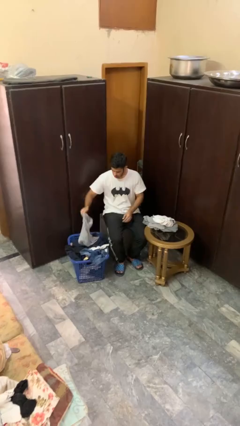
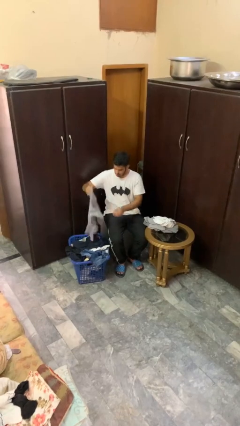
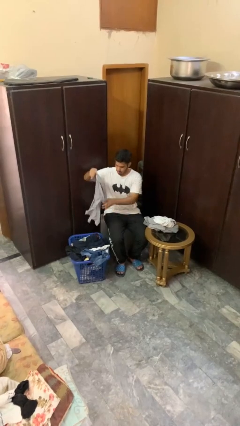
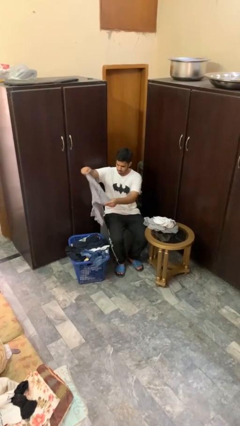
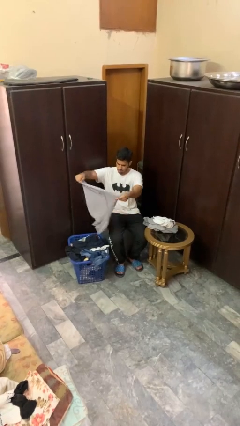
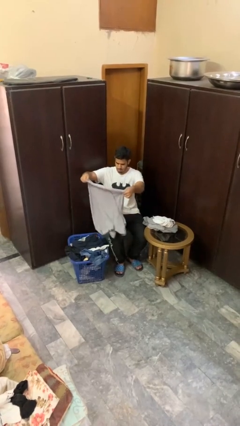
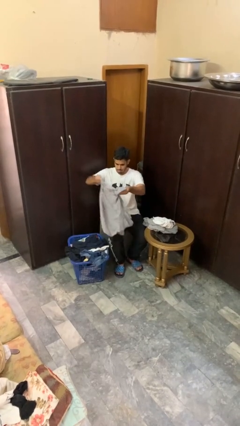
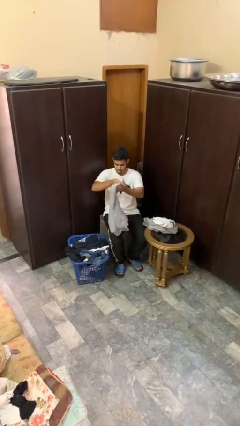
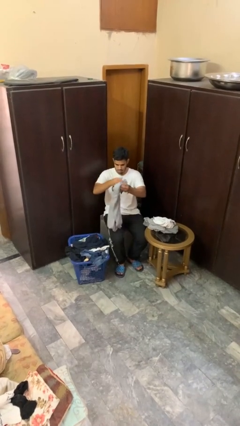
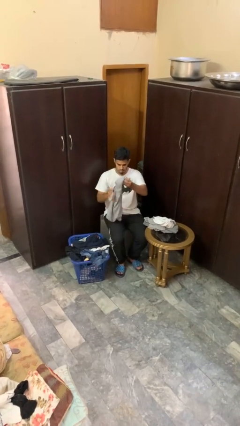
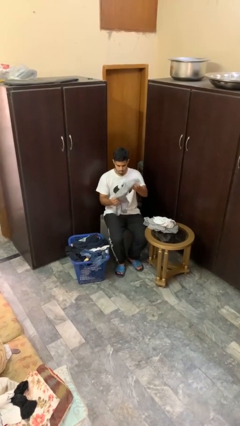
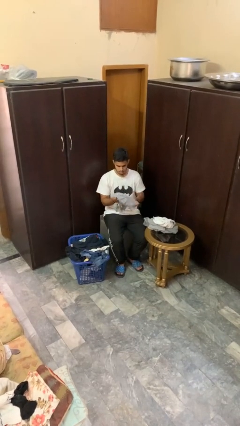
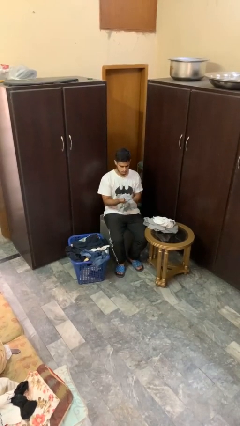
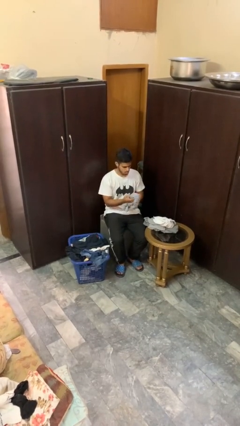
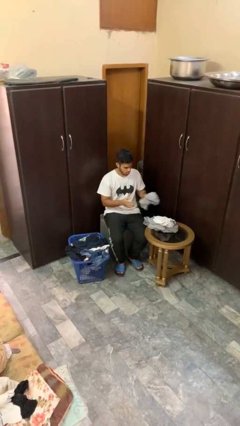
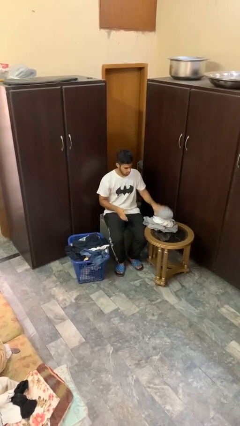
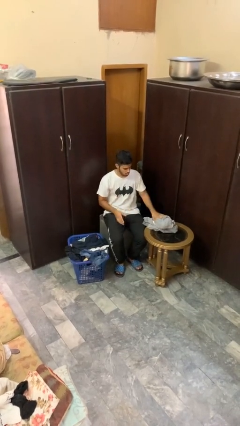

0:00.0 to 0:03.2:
person folds shirt

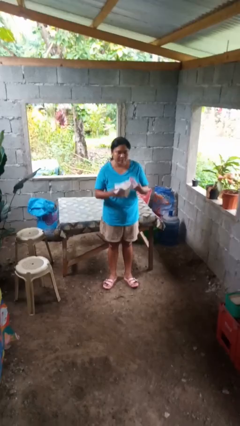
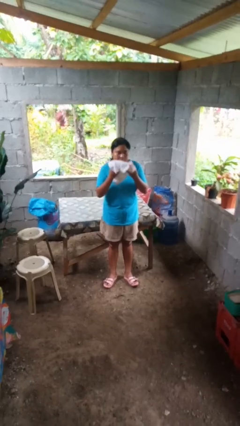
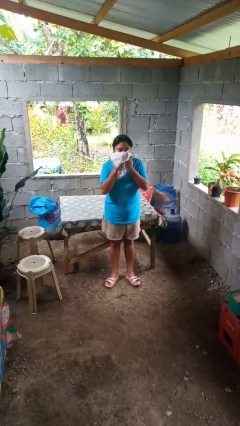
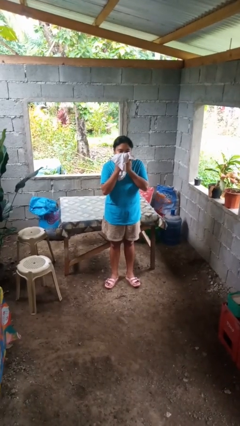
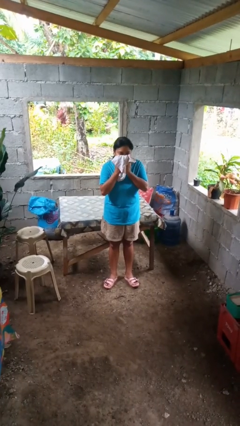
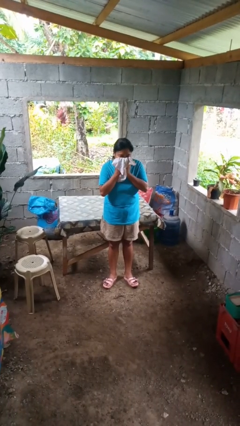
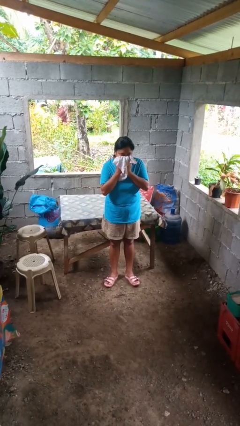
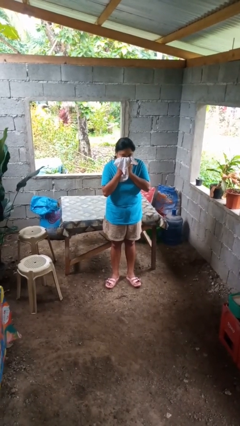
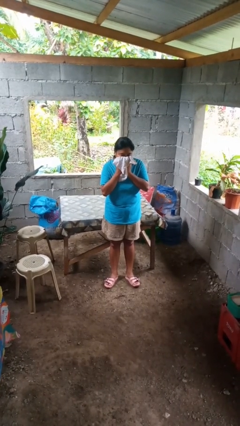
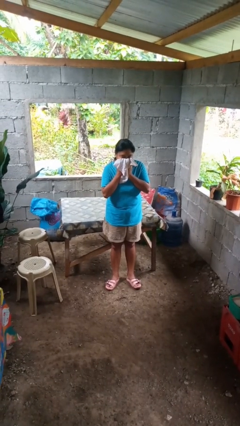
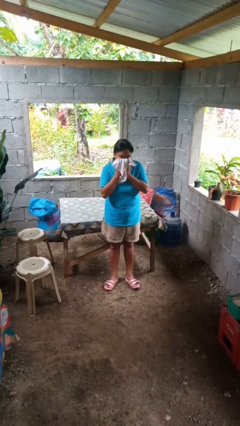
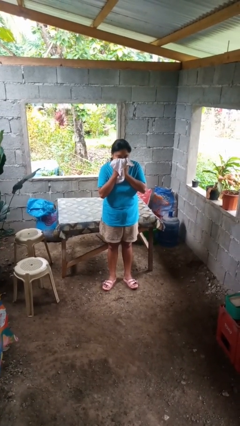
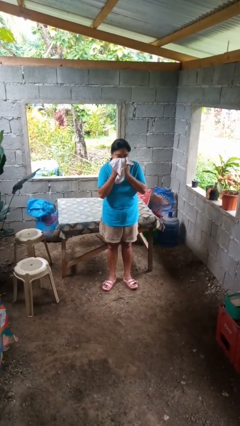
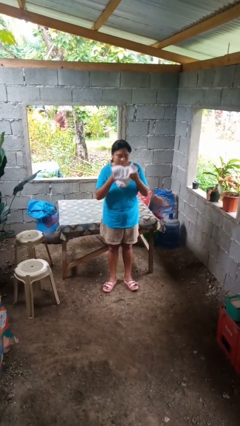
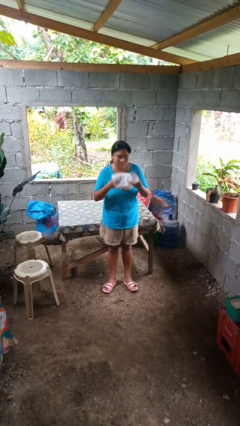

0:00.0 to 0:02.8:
person blows nose

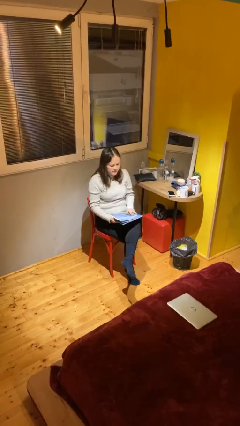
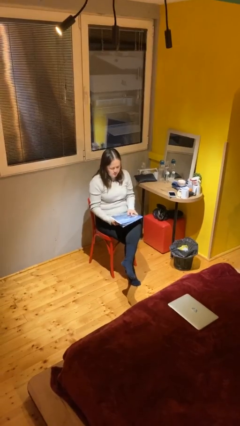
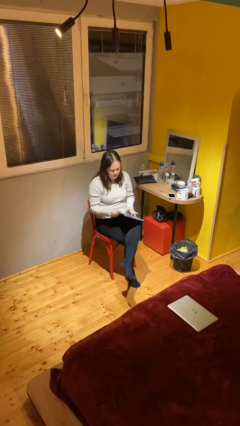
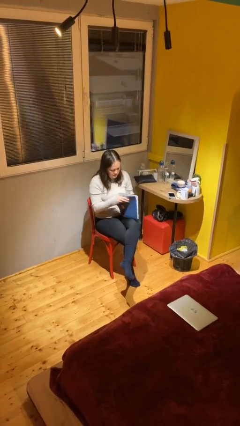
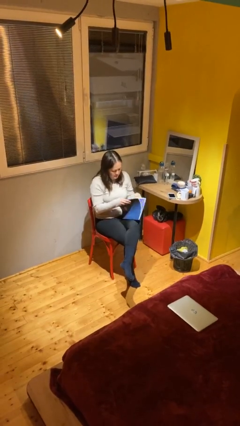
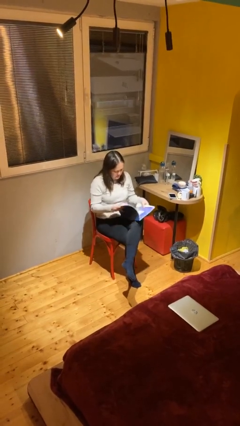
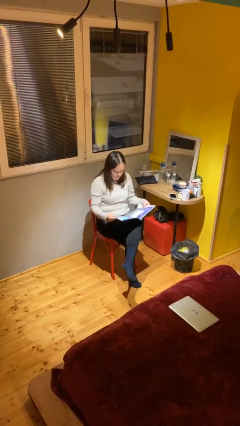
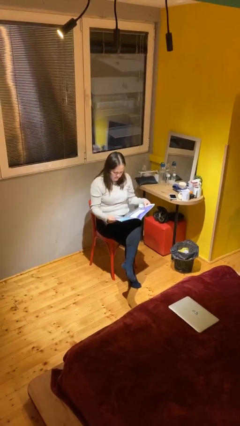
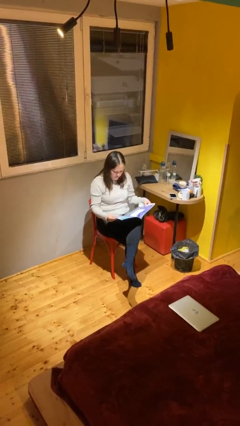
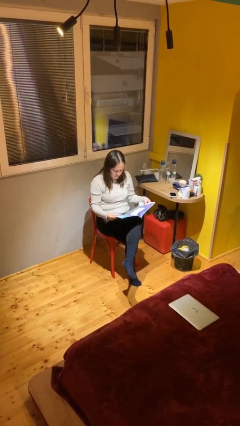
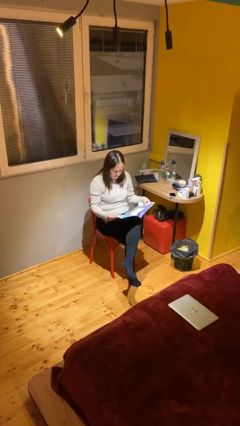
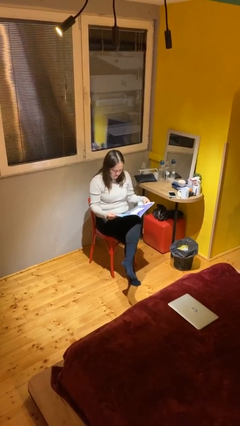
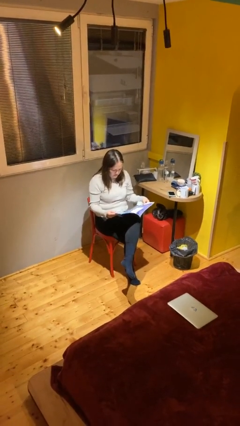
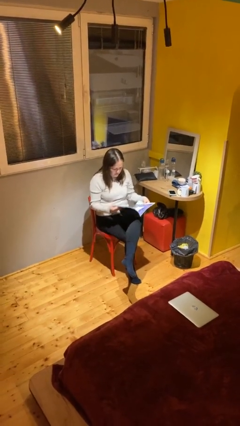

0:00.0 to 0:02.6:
person reads document

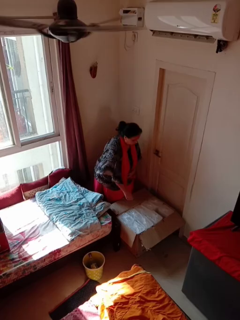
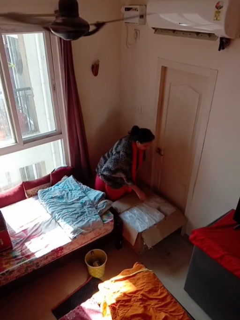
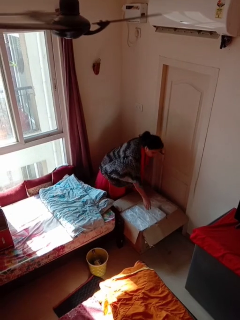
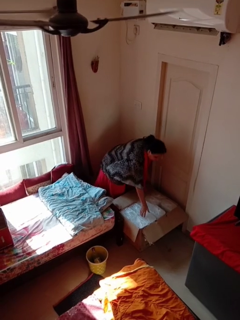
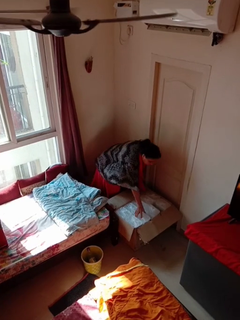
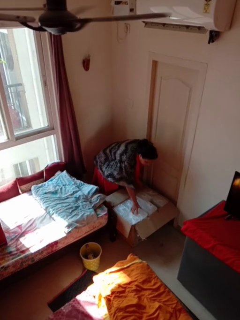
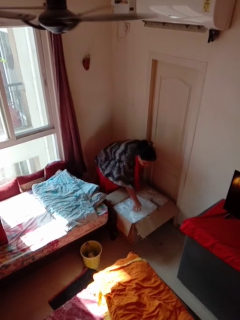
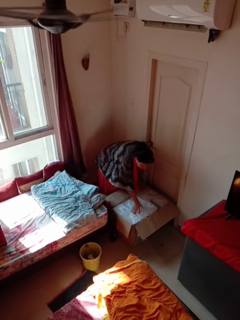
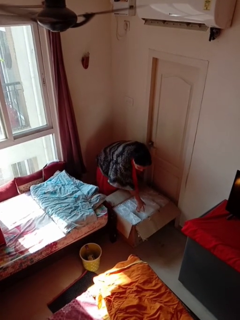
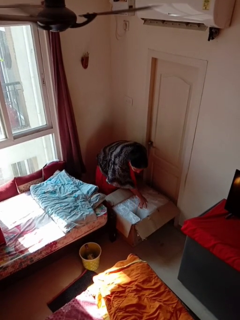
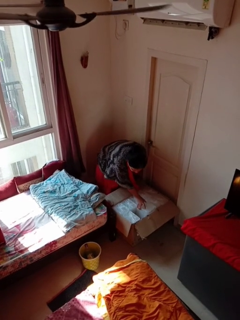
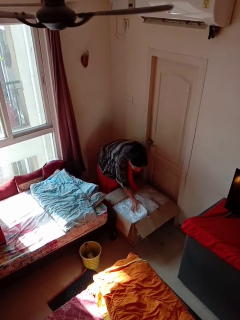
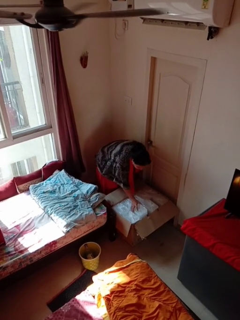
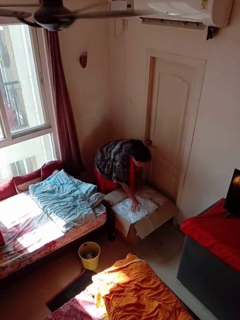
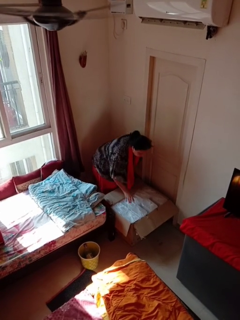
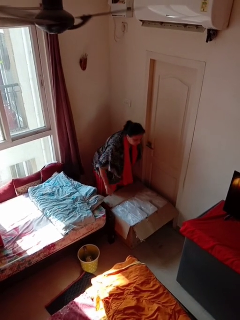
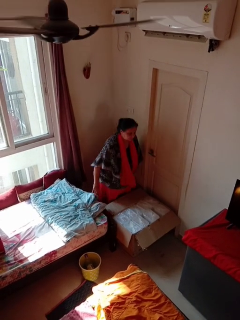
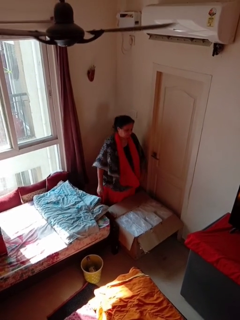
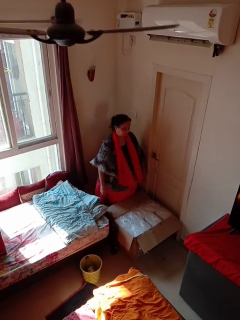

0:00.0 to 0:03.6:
person searches in box

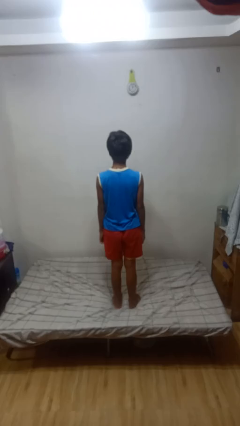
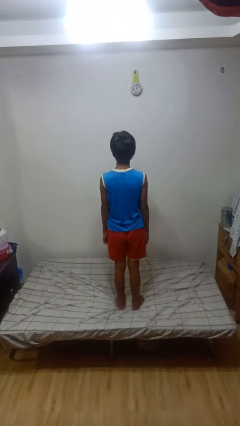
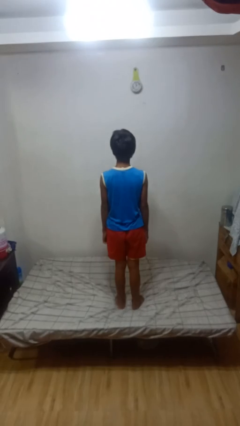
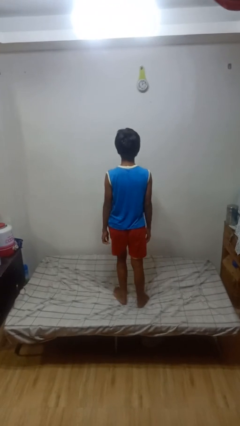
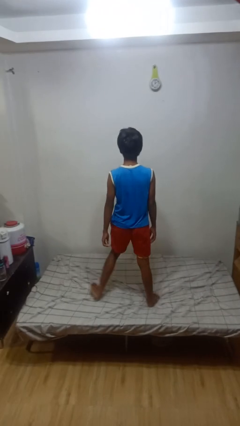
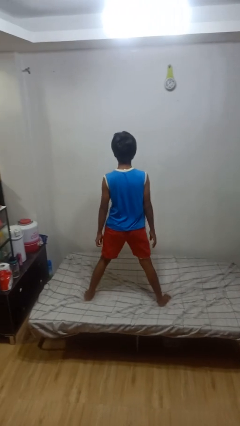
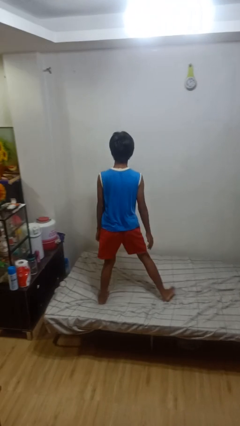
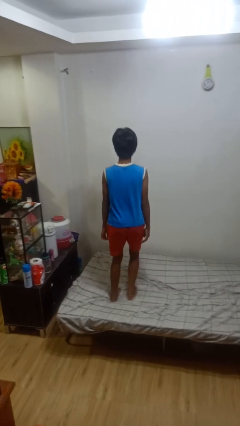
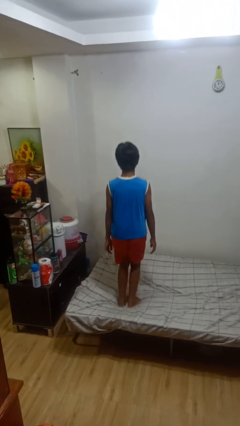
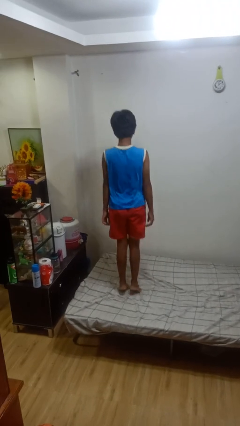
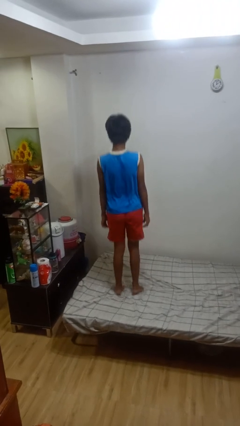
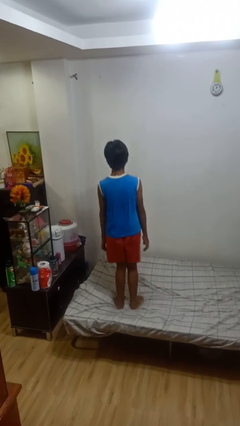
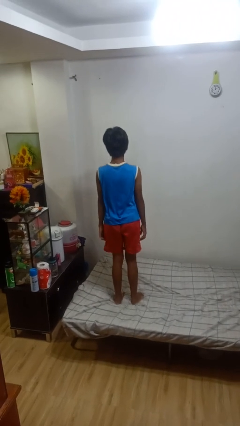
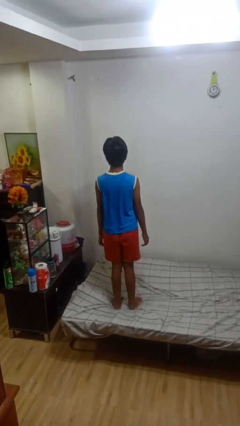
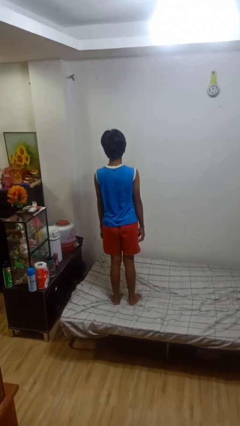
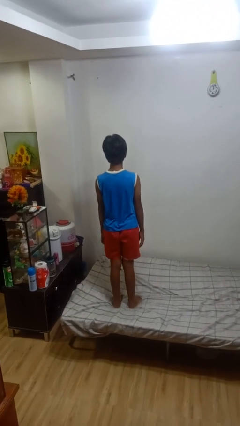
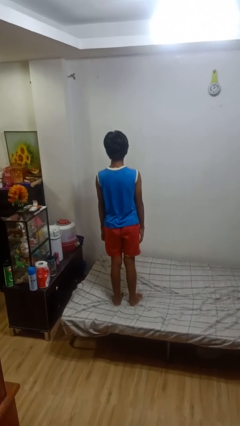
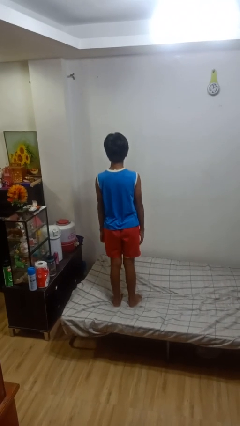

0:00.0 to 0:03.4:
person jumps on bed

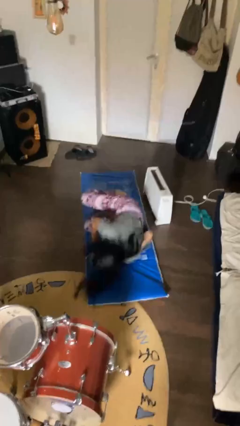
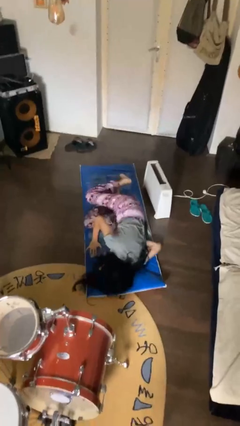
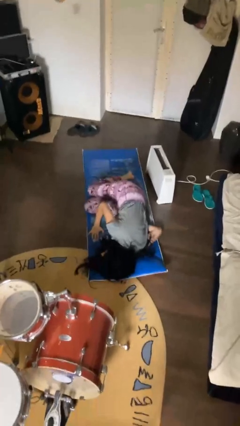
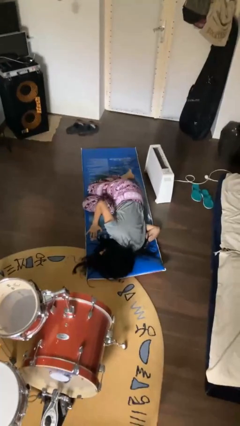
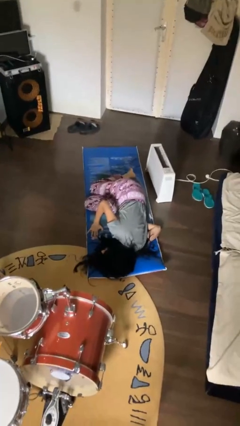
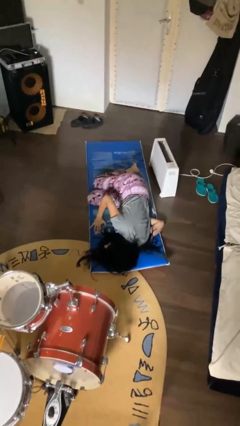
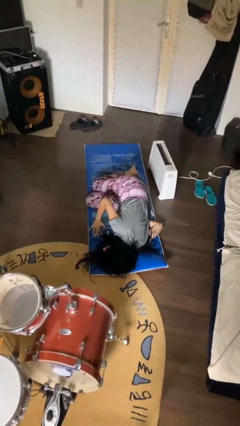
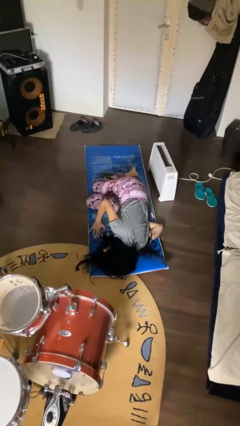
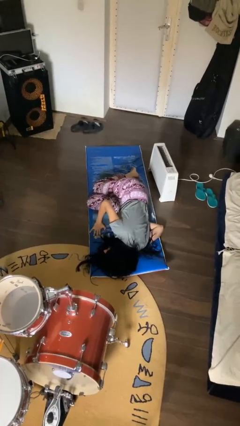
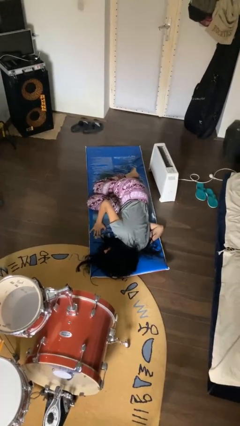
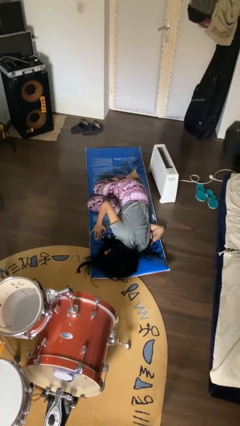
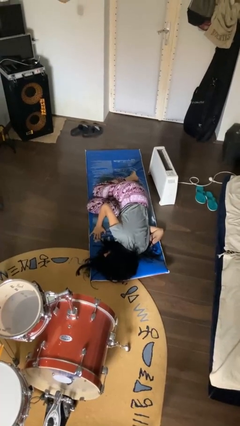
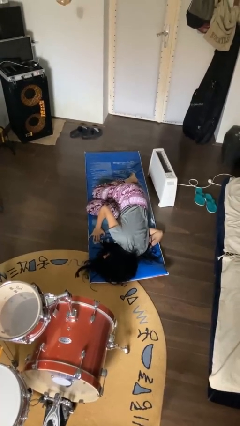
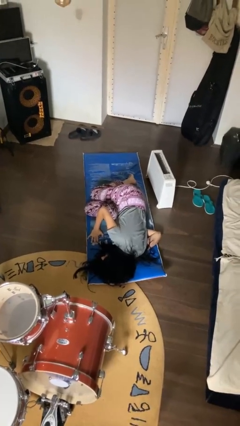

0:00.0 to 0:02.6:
person lies down on floor
